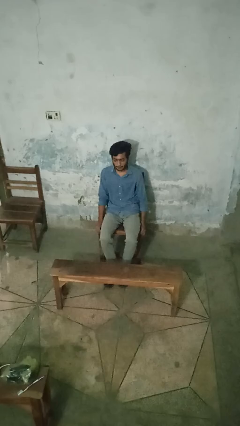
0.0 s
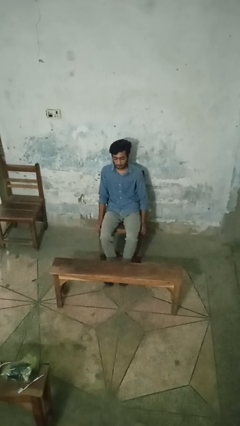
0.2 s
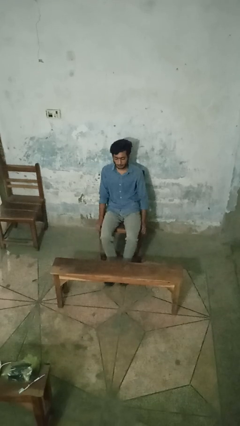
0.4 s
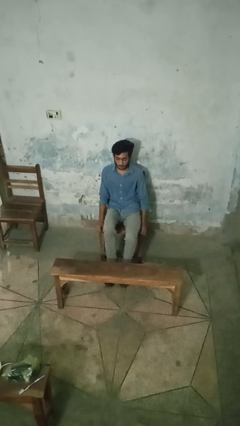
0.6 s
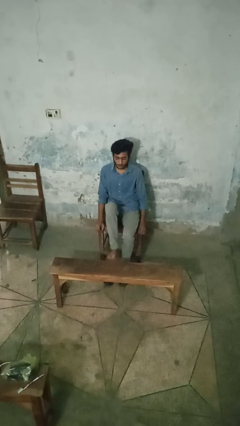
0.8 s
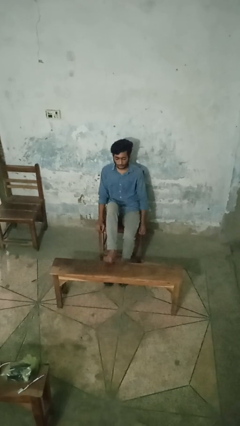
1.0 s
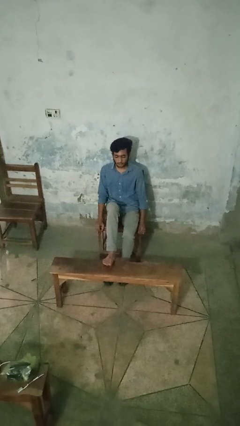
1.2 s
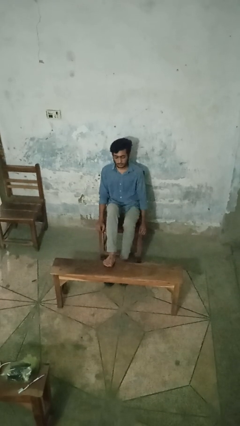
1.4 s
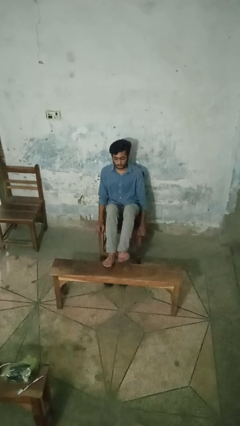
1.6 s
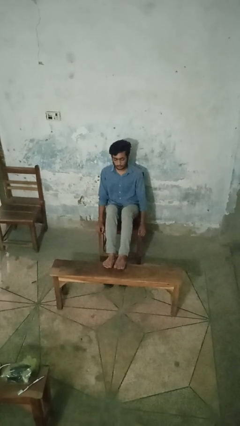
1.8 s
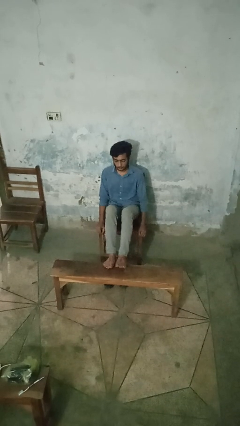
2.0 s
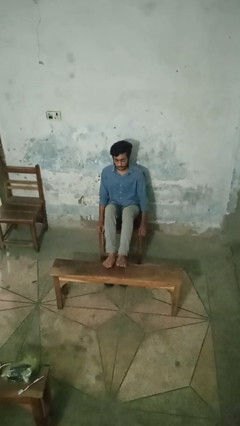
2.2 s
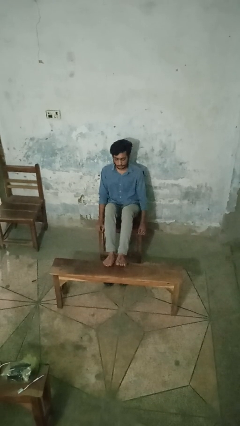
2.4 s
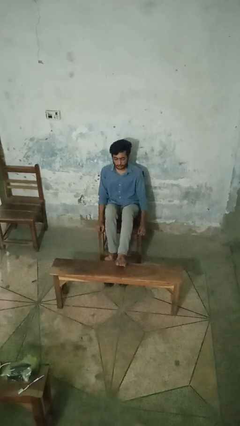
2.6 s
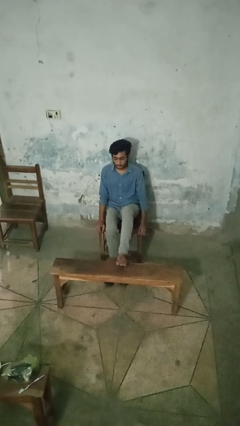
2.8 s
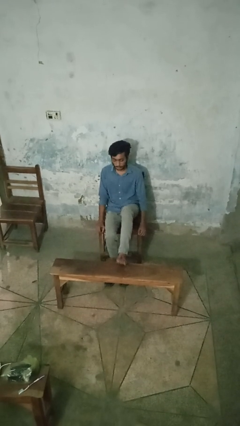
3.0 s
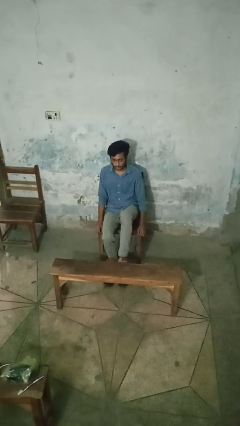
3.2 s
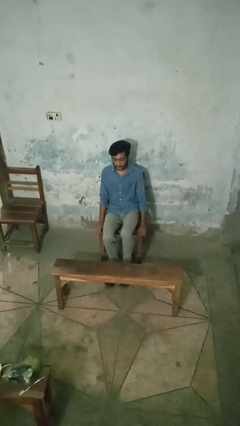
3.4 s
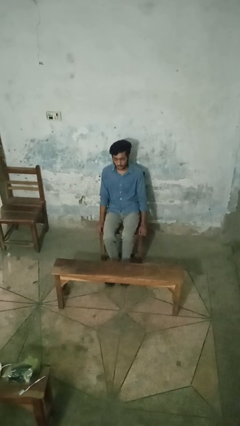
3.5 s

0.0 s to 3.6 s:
person puts feet up

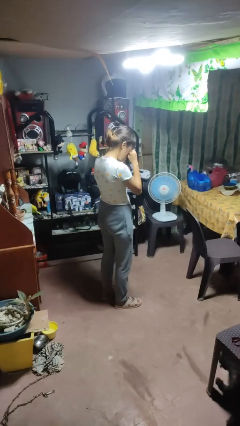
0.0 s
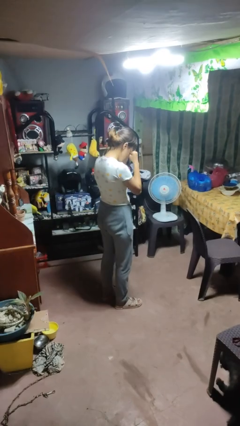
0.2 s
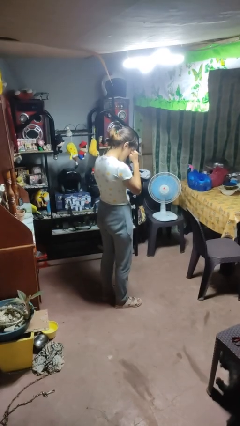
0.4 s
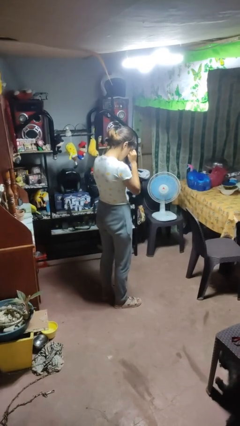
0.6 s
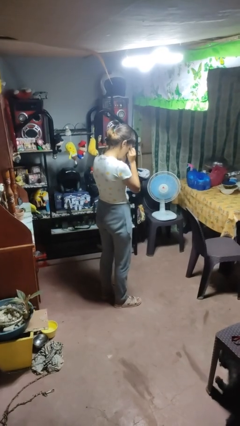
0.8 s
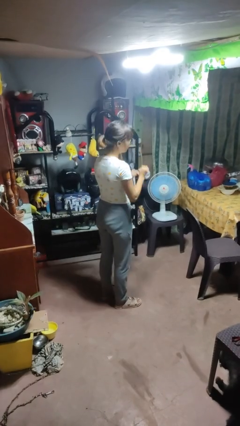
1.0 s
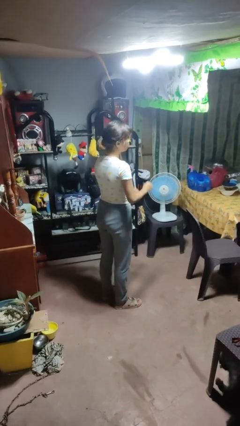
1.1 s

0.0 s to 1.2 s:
person rubs eyes

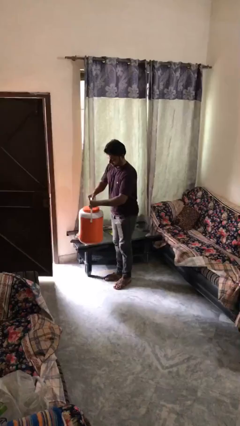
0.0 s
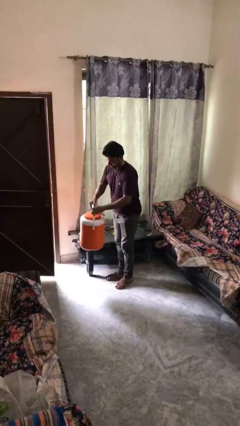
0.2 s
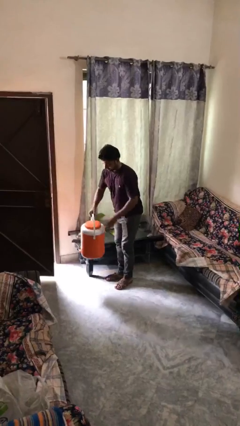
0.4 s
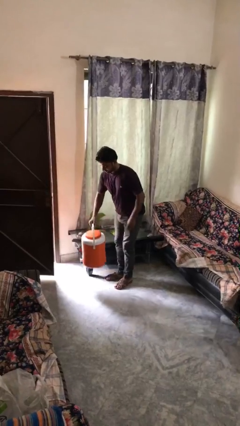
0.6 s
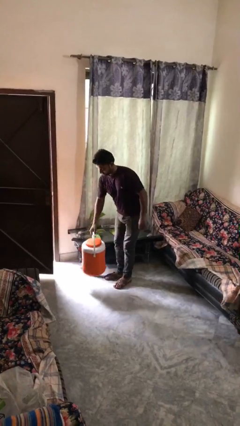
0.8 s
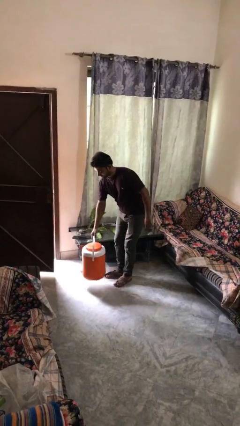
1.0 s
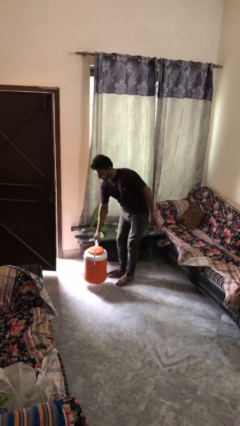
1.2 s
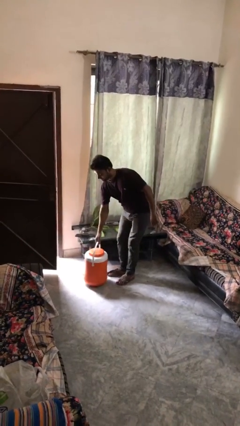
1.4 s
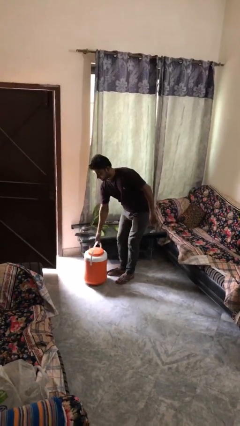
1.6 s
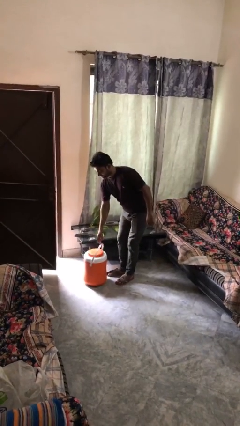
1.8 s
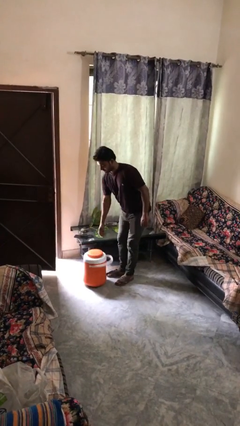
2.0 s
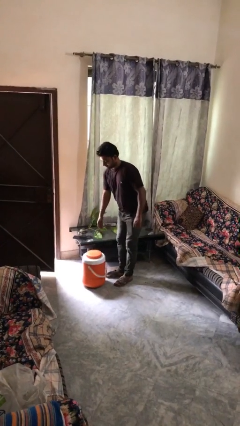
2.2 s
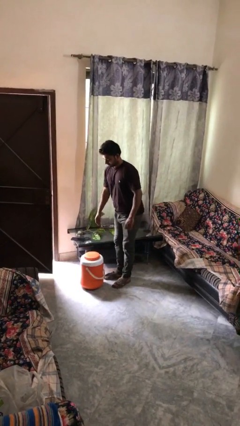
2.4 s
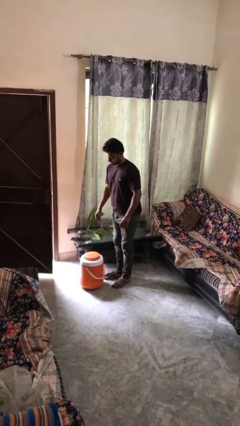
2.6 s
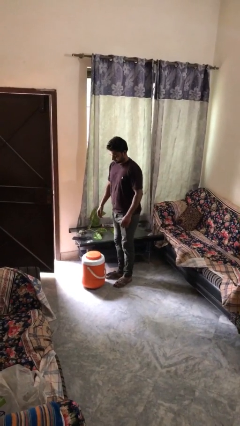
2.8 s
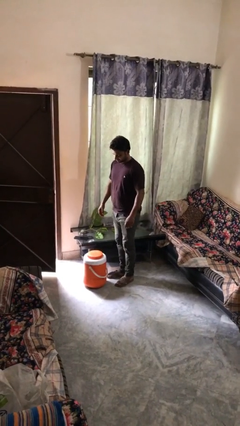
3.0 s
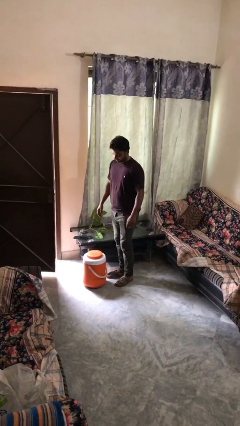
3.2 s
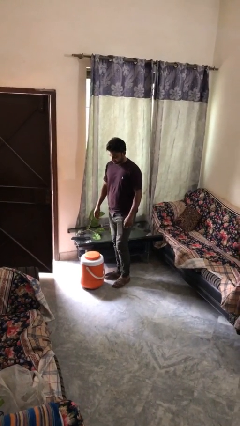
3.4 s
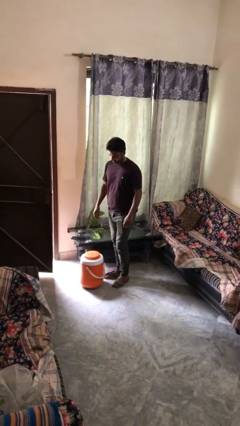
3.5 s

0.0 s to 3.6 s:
person puts down object on floor

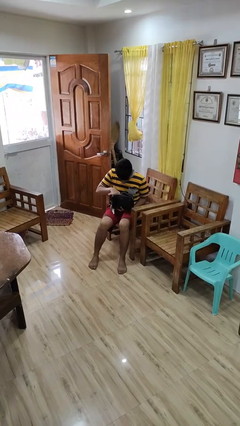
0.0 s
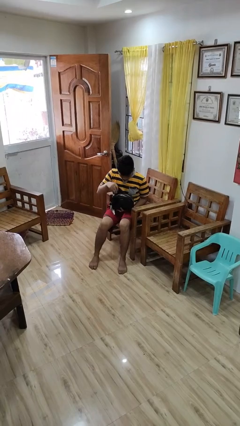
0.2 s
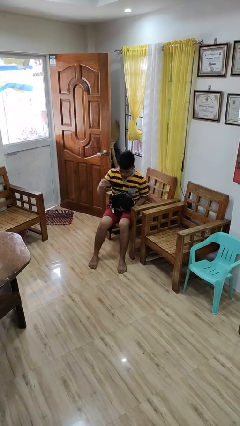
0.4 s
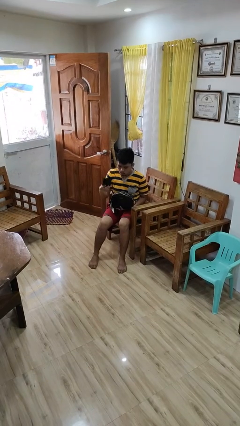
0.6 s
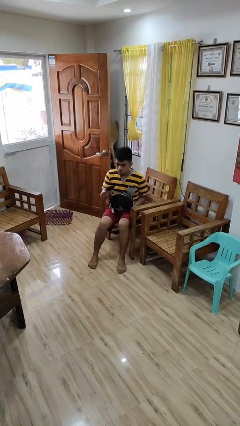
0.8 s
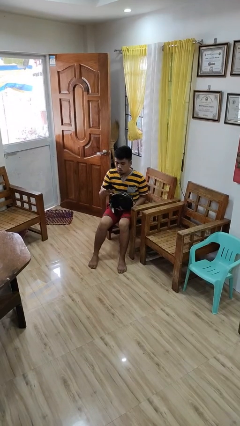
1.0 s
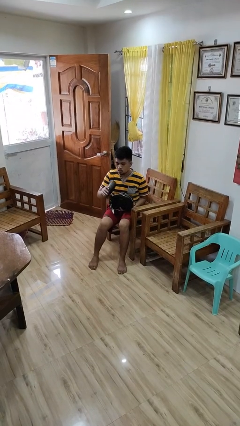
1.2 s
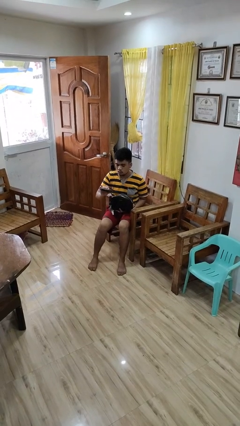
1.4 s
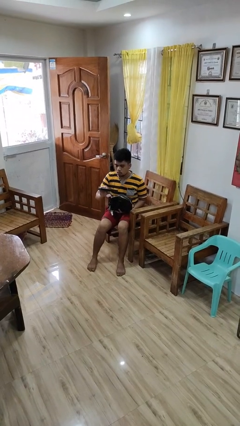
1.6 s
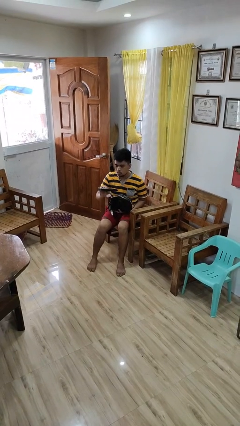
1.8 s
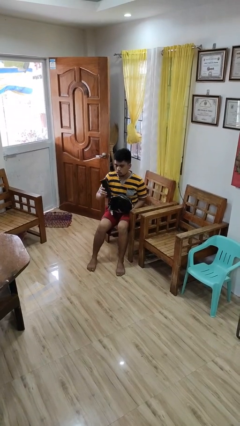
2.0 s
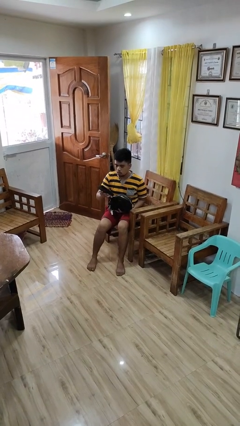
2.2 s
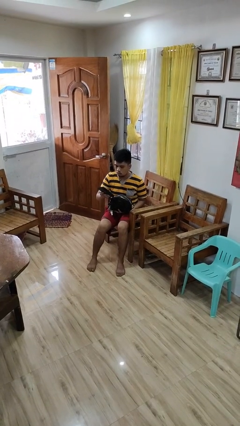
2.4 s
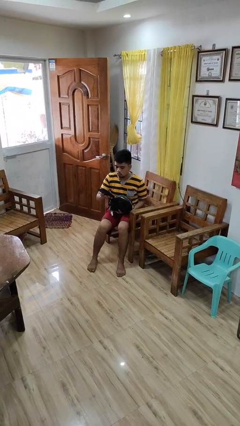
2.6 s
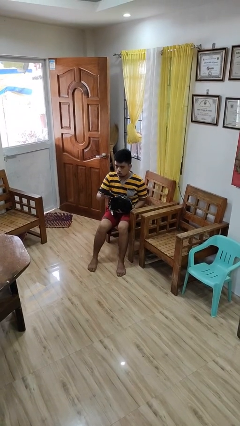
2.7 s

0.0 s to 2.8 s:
person takes object from purse

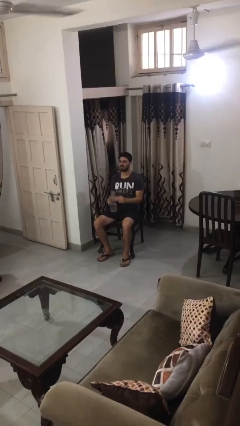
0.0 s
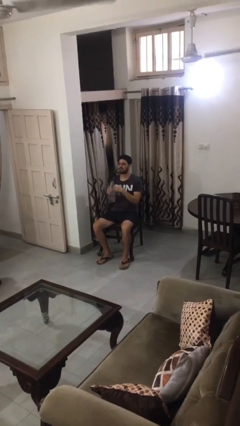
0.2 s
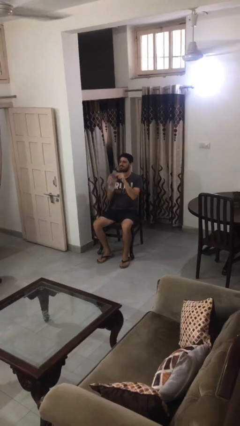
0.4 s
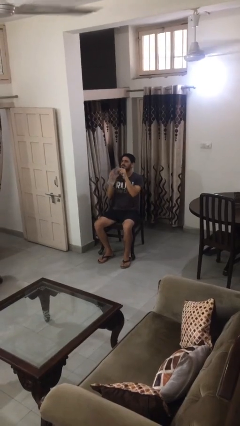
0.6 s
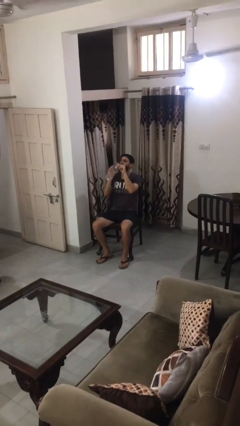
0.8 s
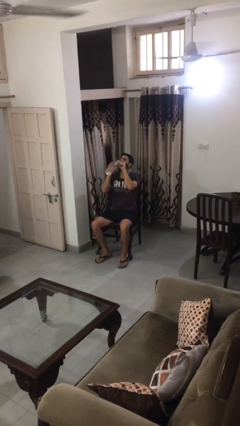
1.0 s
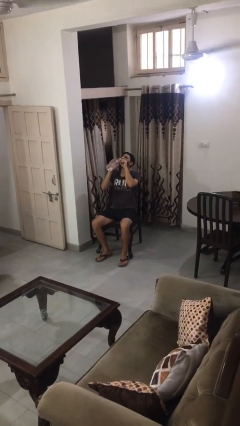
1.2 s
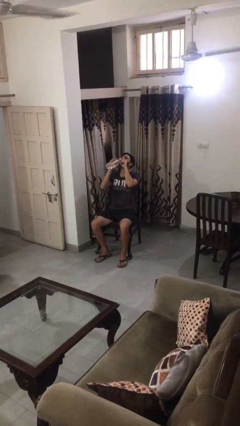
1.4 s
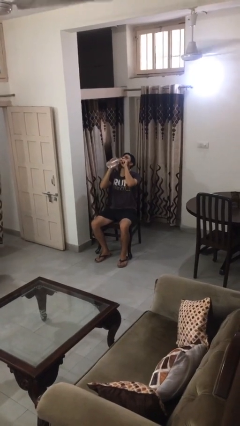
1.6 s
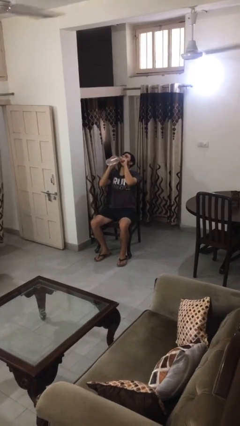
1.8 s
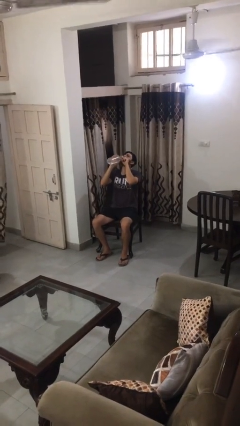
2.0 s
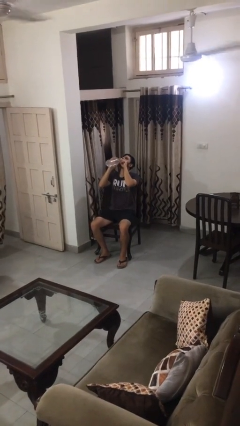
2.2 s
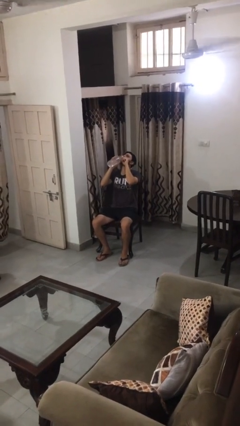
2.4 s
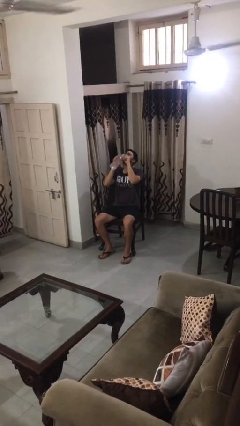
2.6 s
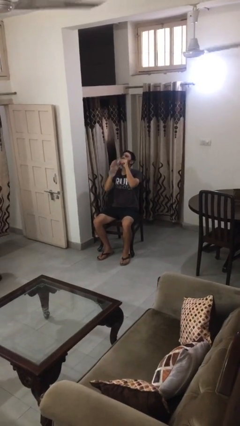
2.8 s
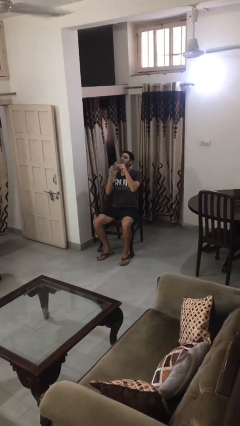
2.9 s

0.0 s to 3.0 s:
person drinks from bottle

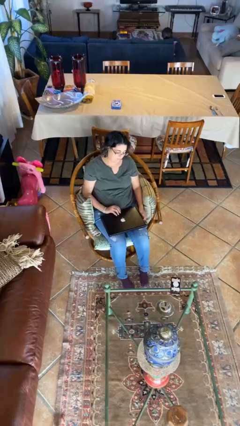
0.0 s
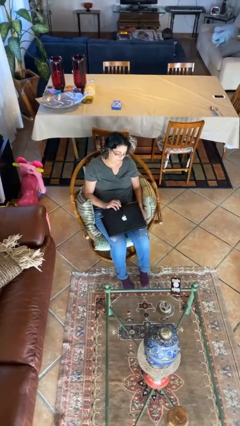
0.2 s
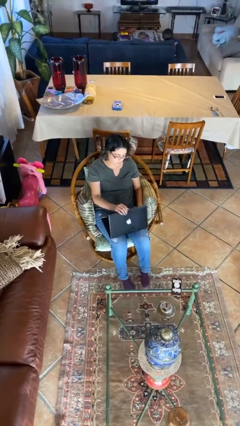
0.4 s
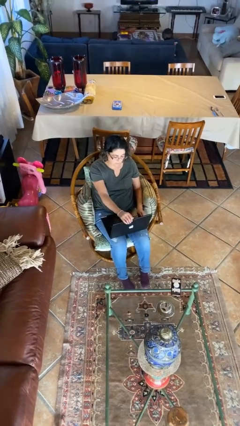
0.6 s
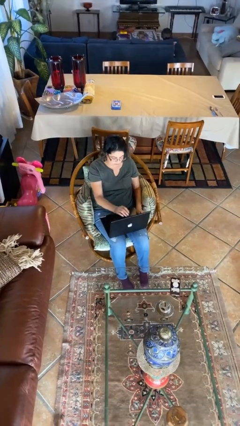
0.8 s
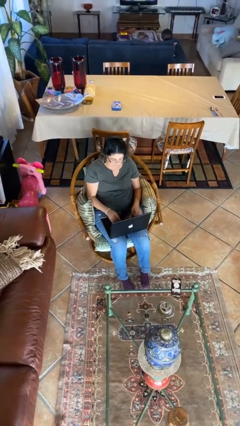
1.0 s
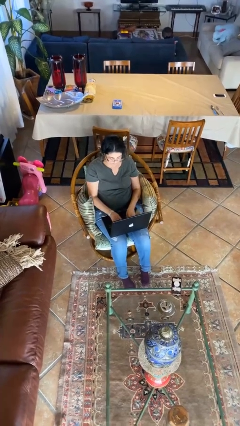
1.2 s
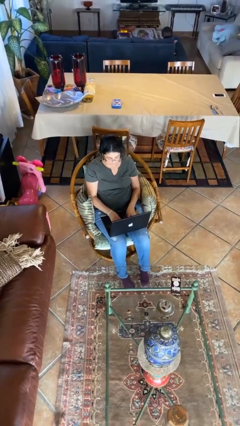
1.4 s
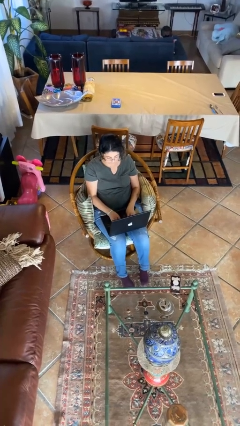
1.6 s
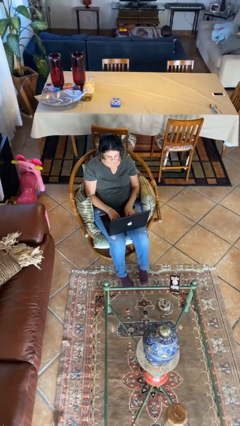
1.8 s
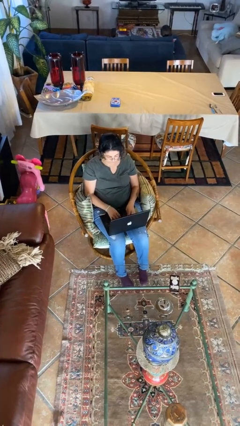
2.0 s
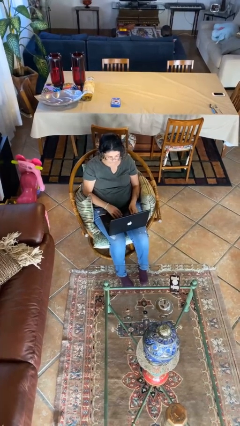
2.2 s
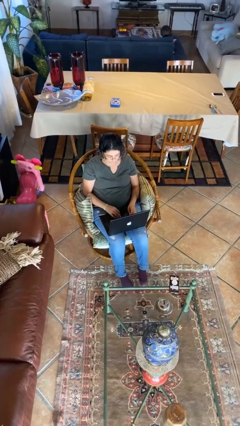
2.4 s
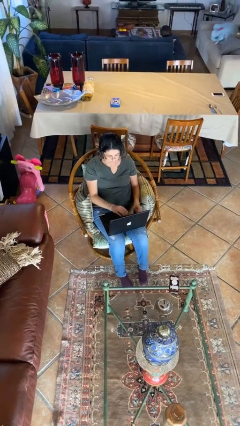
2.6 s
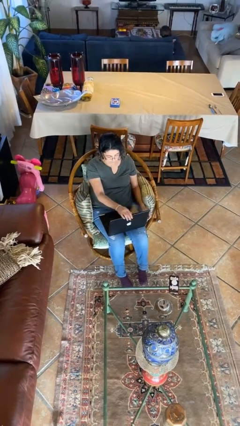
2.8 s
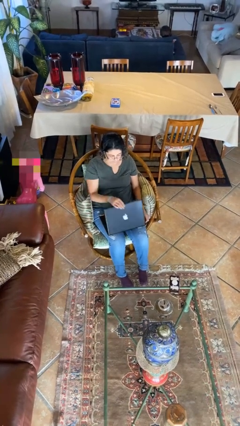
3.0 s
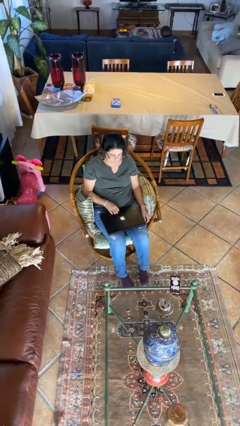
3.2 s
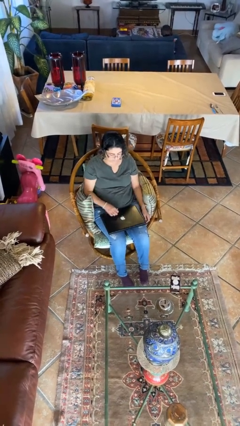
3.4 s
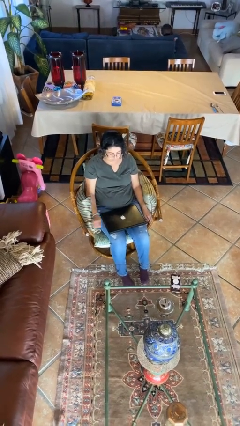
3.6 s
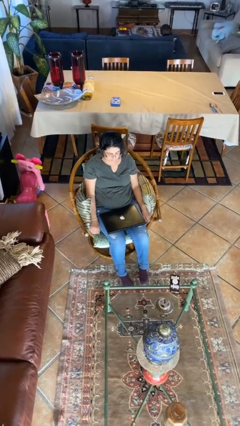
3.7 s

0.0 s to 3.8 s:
person interacts with laptop
